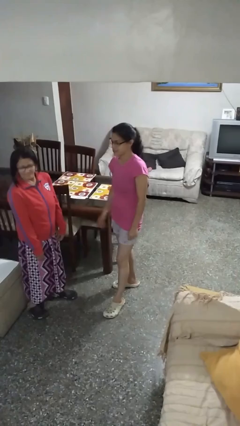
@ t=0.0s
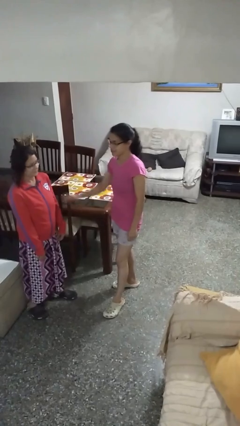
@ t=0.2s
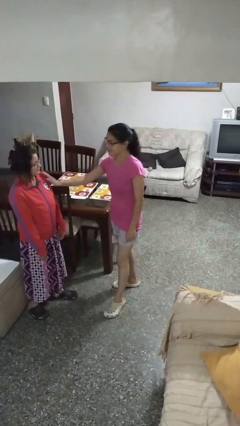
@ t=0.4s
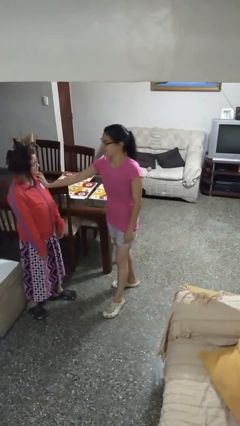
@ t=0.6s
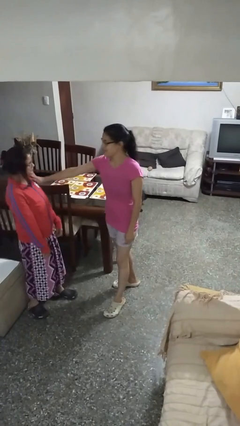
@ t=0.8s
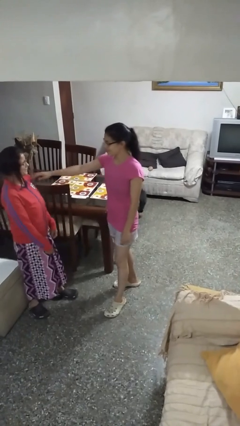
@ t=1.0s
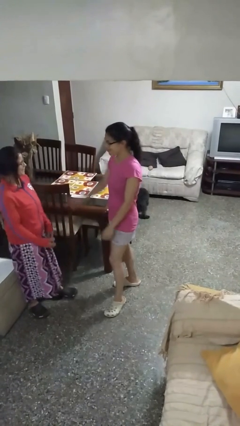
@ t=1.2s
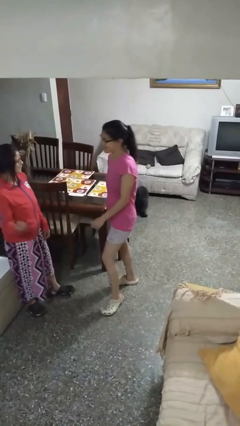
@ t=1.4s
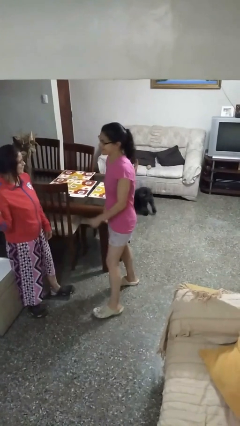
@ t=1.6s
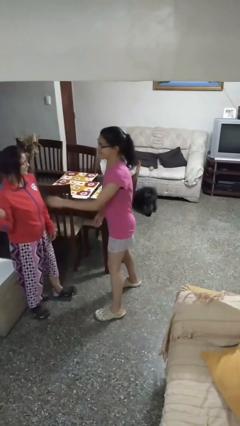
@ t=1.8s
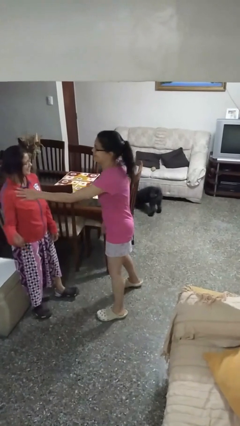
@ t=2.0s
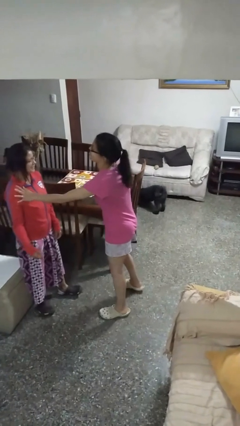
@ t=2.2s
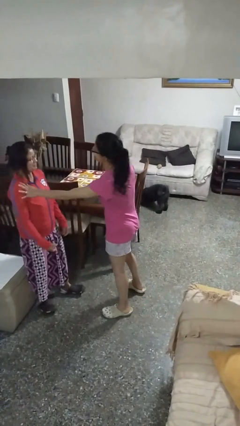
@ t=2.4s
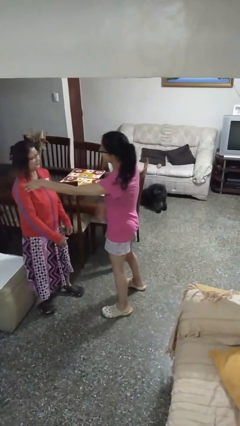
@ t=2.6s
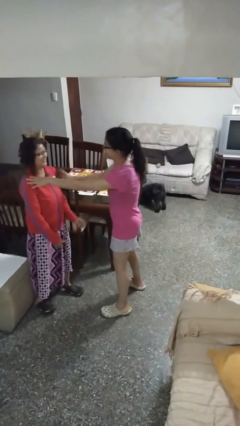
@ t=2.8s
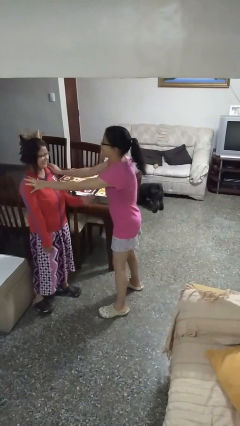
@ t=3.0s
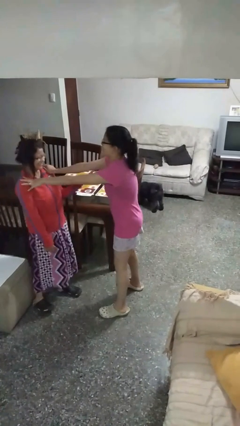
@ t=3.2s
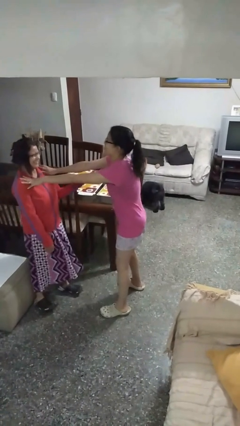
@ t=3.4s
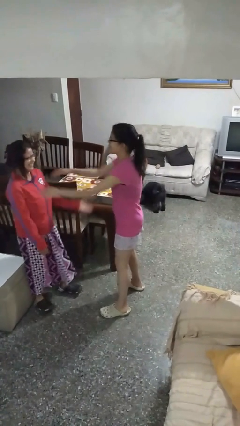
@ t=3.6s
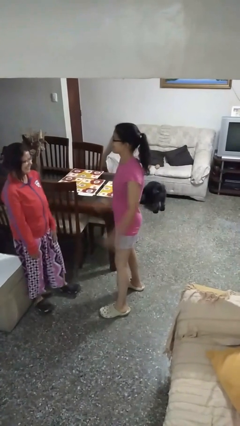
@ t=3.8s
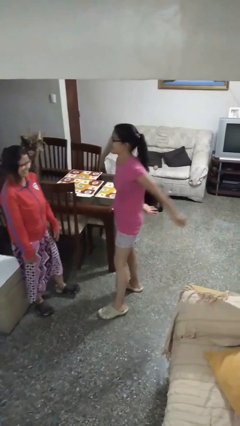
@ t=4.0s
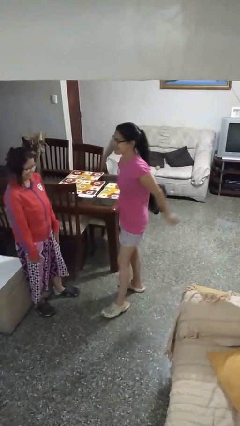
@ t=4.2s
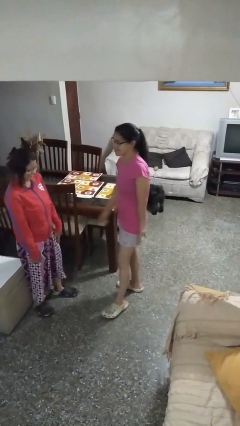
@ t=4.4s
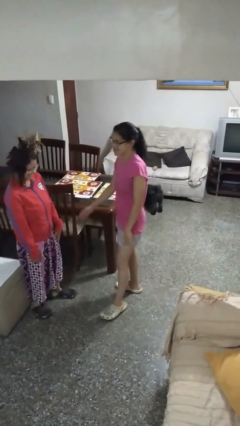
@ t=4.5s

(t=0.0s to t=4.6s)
person shoves person

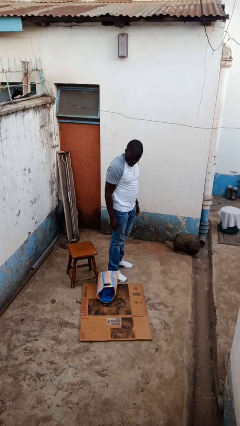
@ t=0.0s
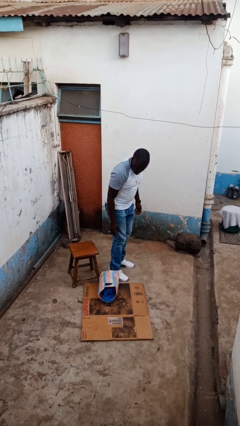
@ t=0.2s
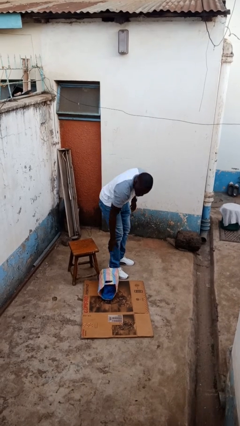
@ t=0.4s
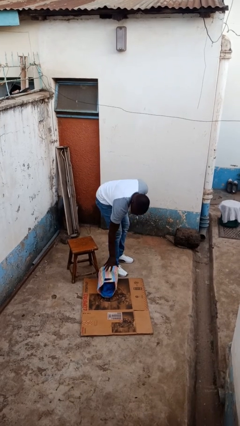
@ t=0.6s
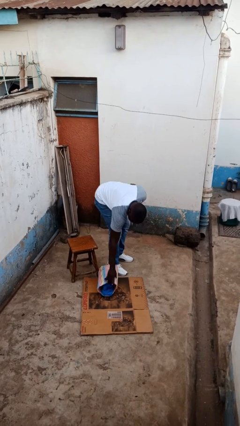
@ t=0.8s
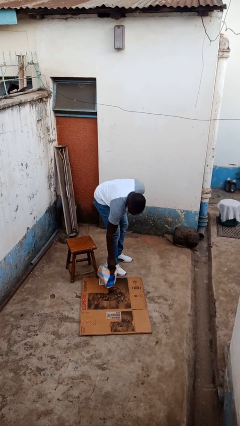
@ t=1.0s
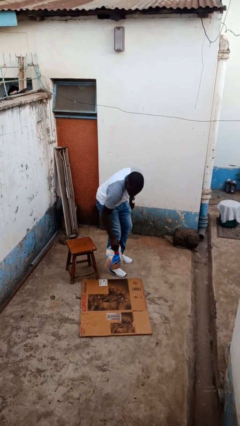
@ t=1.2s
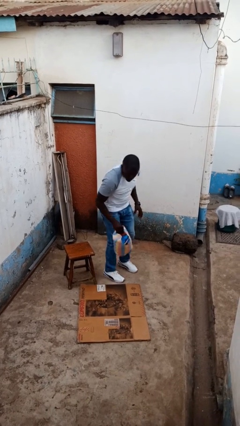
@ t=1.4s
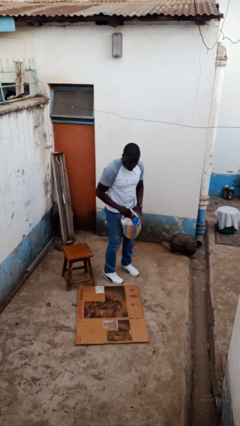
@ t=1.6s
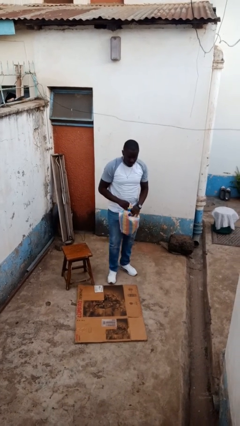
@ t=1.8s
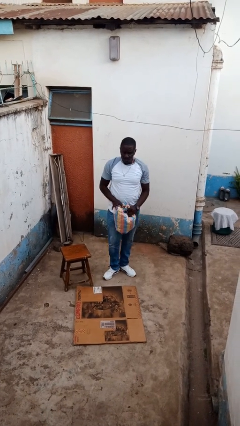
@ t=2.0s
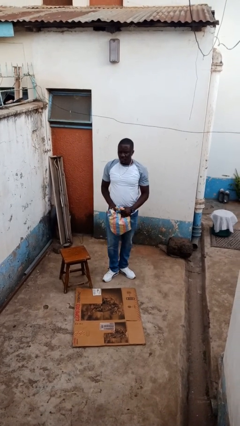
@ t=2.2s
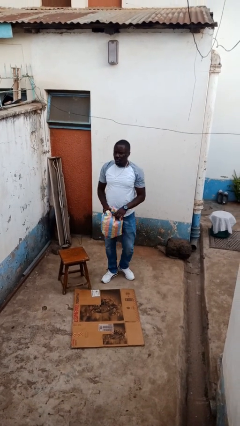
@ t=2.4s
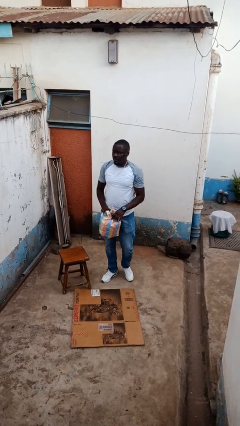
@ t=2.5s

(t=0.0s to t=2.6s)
person picks up object from floor

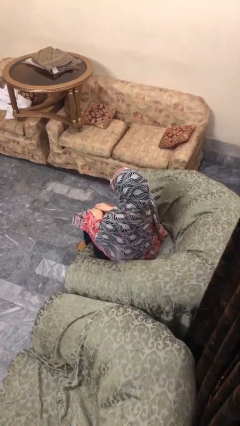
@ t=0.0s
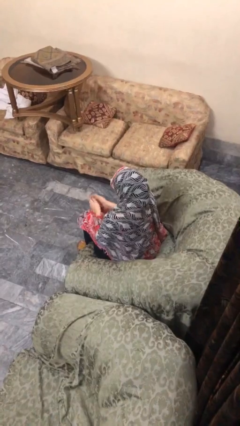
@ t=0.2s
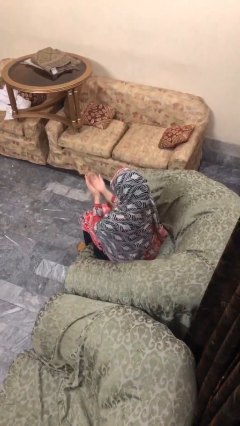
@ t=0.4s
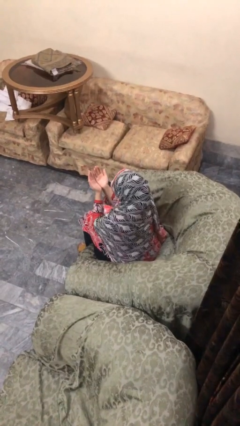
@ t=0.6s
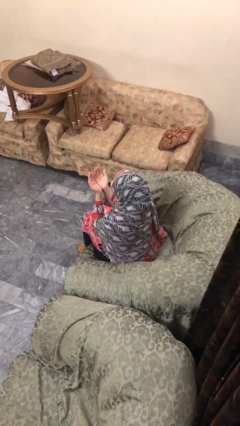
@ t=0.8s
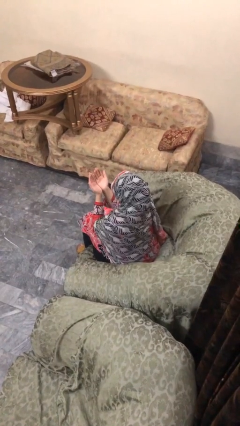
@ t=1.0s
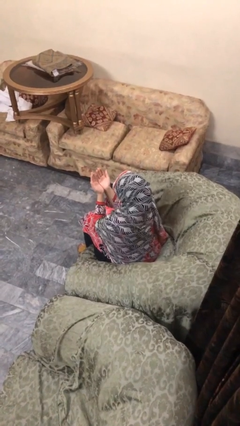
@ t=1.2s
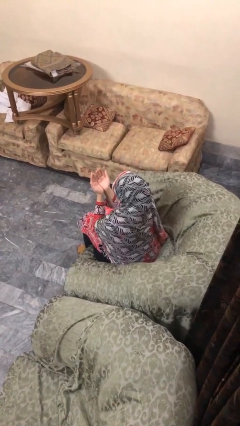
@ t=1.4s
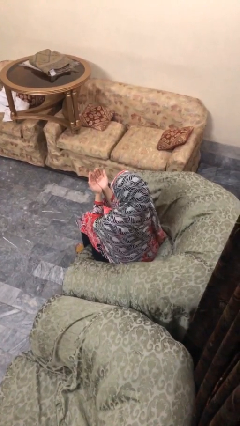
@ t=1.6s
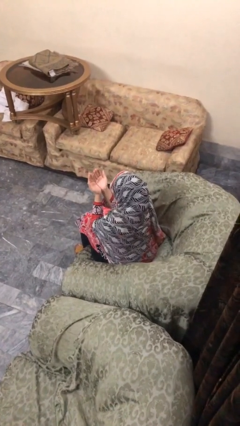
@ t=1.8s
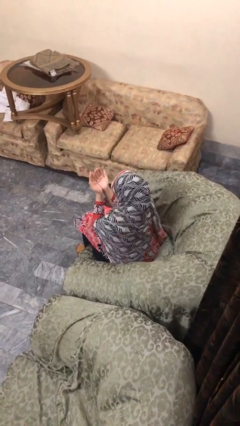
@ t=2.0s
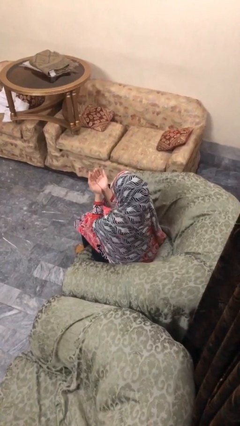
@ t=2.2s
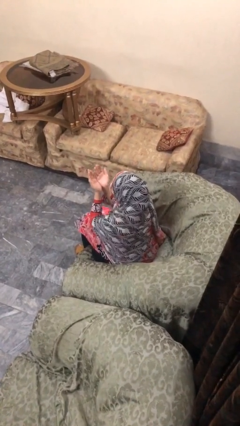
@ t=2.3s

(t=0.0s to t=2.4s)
person prays

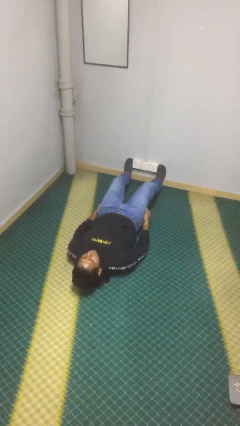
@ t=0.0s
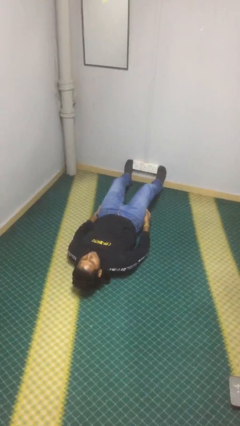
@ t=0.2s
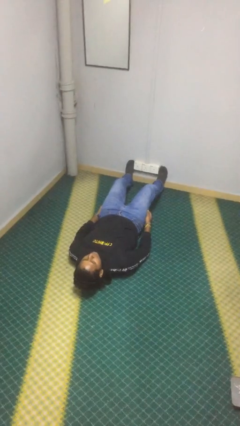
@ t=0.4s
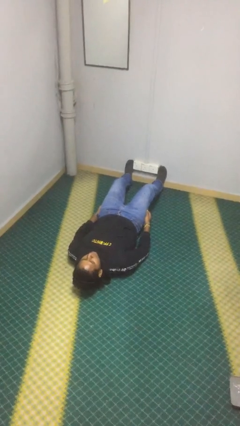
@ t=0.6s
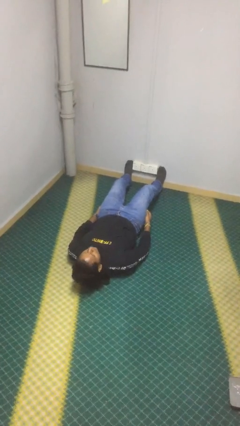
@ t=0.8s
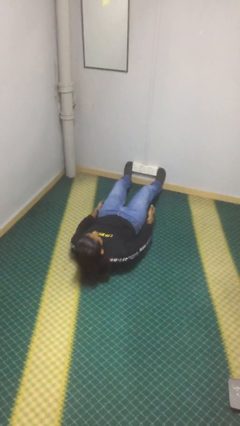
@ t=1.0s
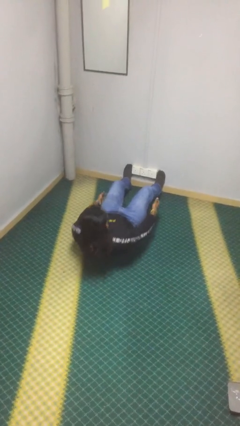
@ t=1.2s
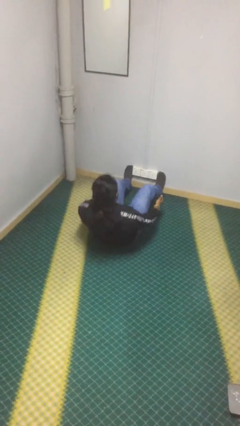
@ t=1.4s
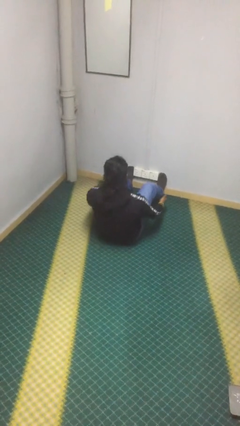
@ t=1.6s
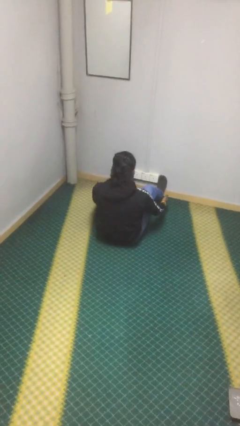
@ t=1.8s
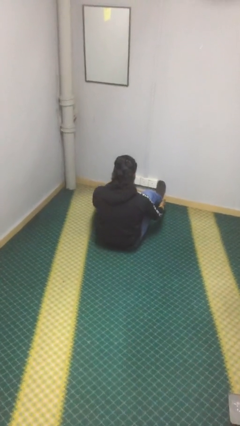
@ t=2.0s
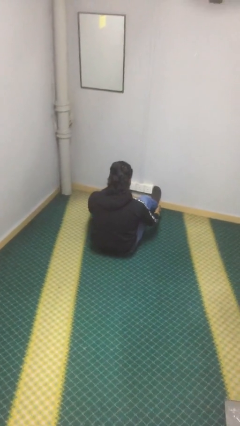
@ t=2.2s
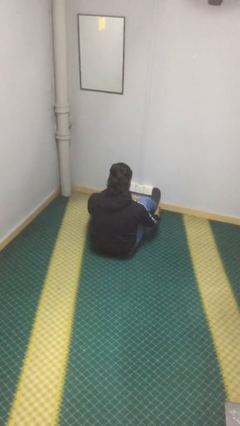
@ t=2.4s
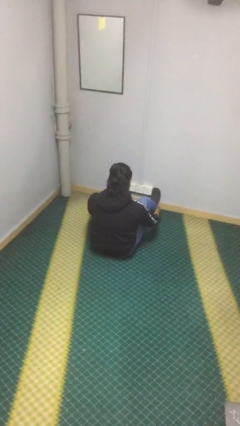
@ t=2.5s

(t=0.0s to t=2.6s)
person exercises with situp

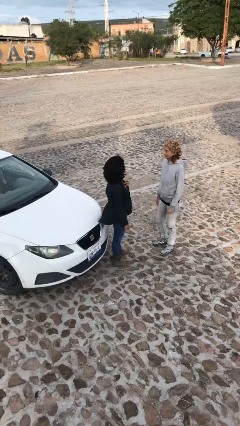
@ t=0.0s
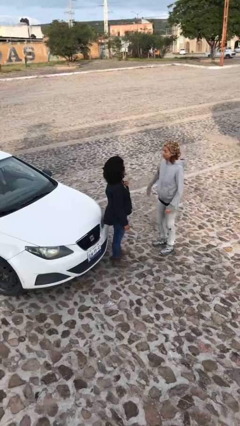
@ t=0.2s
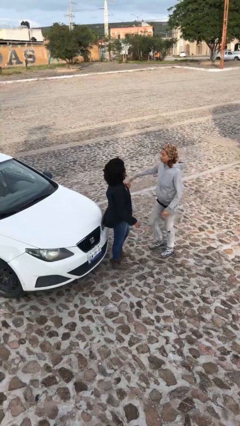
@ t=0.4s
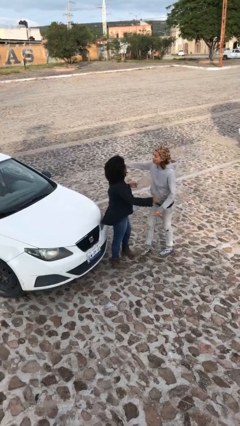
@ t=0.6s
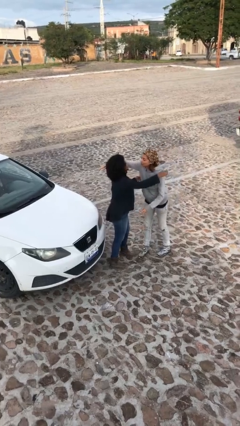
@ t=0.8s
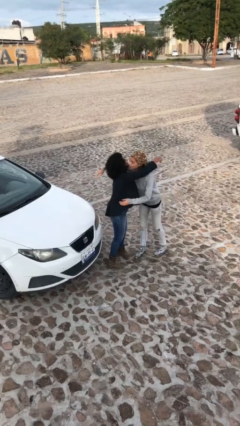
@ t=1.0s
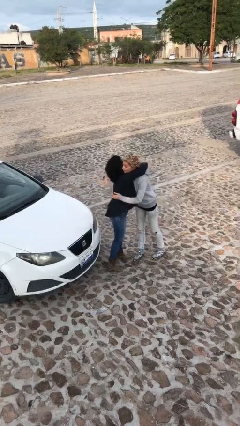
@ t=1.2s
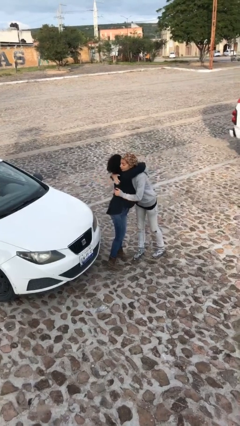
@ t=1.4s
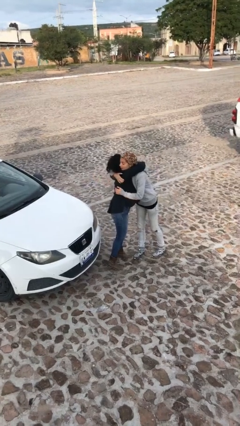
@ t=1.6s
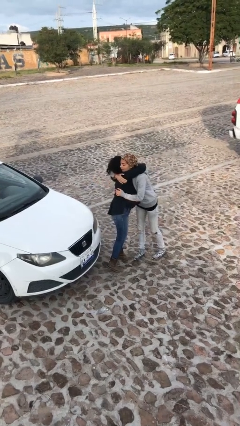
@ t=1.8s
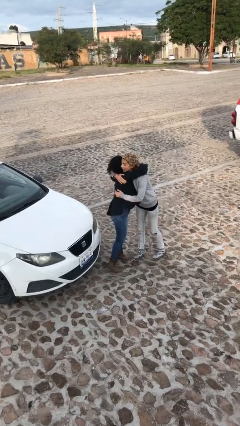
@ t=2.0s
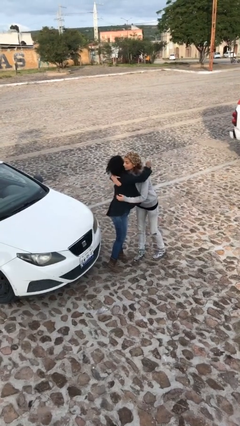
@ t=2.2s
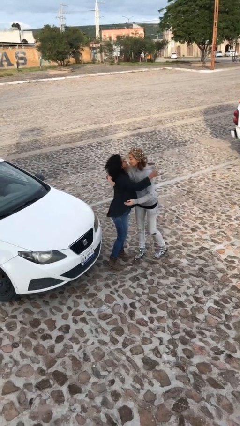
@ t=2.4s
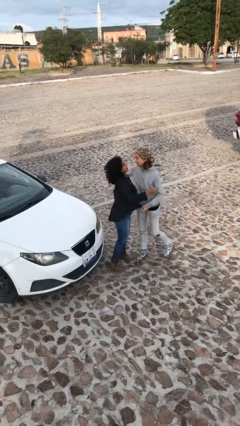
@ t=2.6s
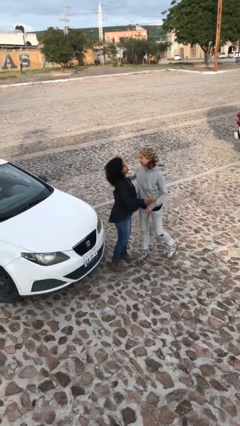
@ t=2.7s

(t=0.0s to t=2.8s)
person embraces person

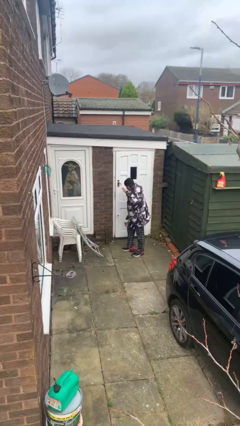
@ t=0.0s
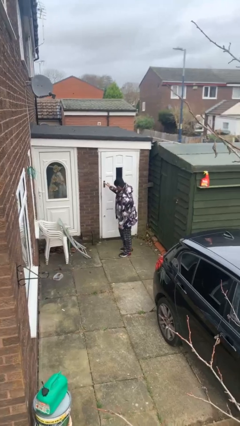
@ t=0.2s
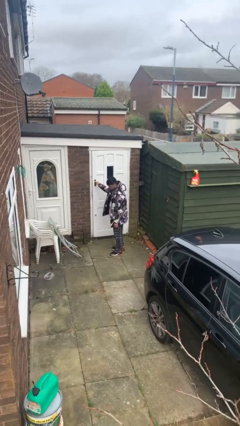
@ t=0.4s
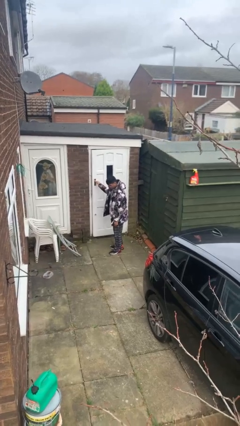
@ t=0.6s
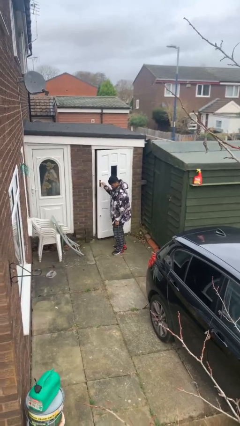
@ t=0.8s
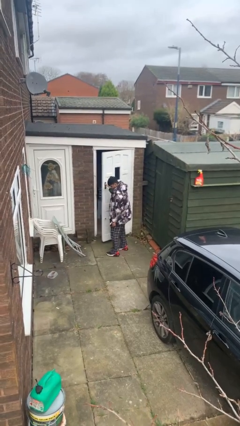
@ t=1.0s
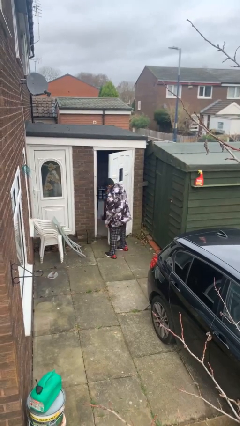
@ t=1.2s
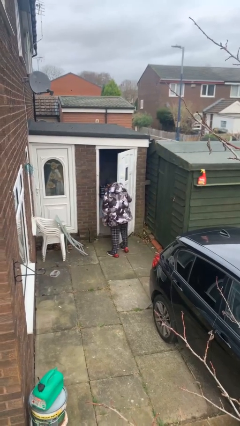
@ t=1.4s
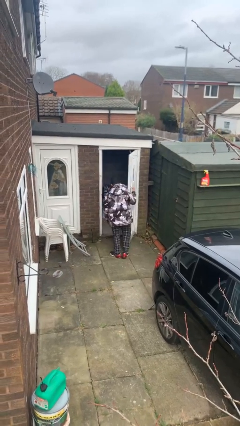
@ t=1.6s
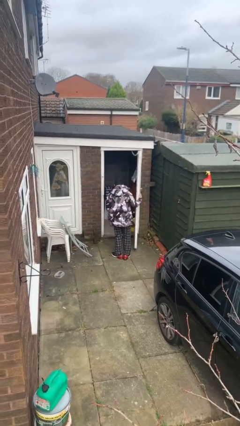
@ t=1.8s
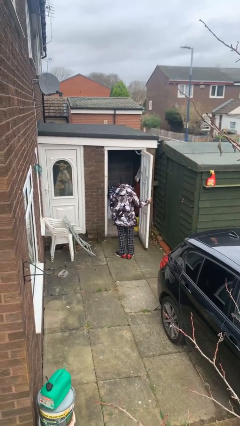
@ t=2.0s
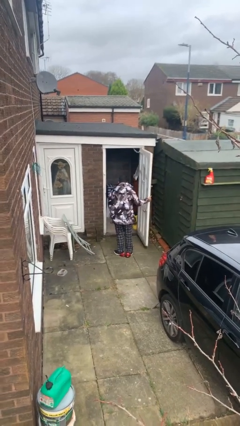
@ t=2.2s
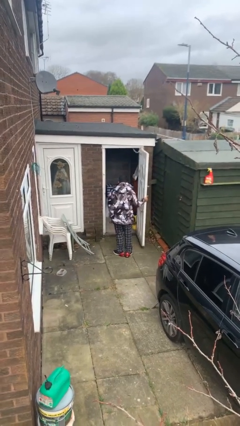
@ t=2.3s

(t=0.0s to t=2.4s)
person opens facility door
